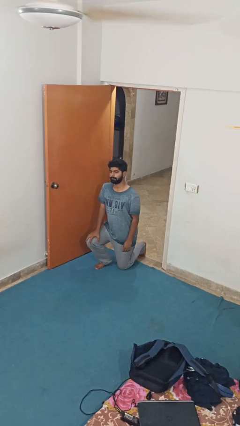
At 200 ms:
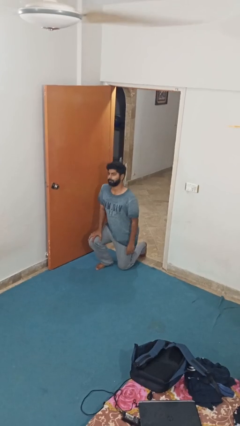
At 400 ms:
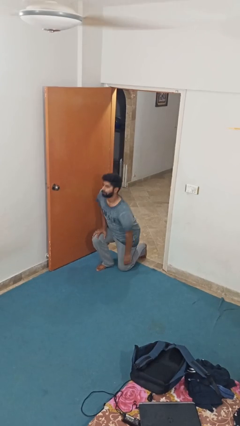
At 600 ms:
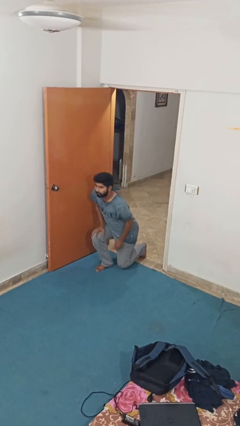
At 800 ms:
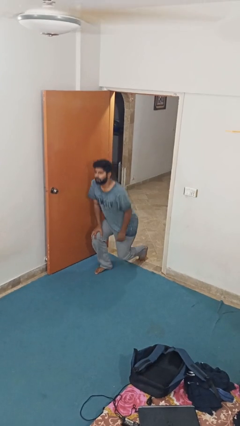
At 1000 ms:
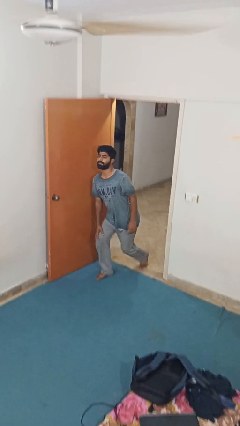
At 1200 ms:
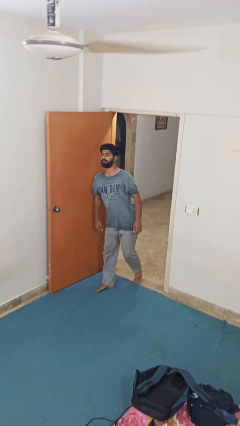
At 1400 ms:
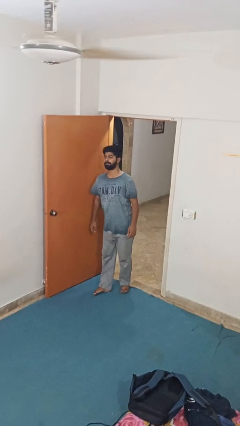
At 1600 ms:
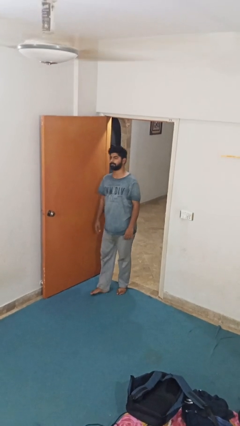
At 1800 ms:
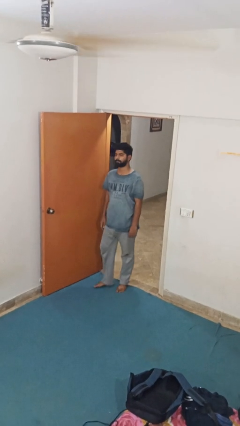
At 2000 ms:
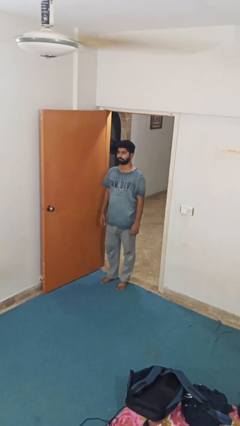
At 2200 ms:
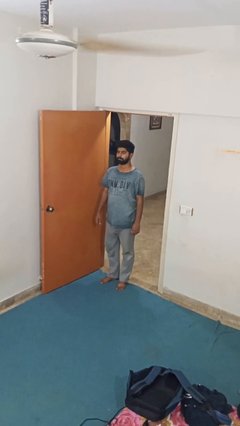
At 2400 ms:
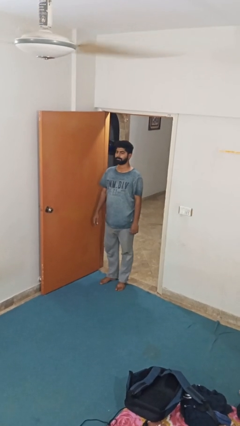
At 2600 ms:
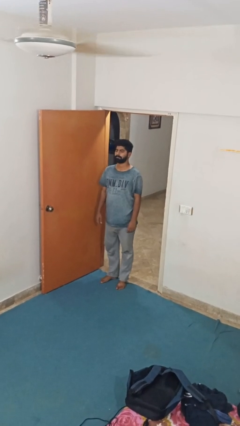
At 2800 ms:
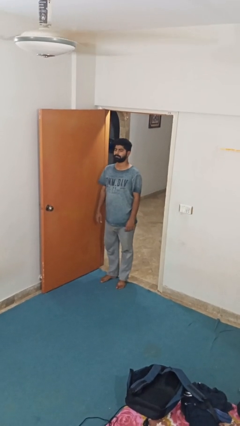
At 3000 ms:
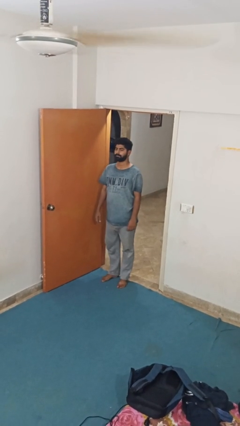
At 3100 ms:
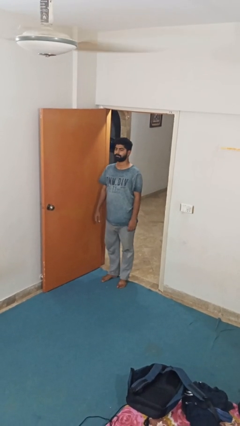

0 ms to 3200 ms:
person stands up from floor

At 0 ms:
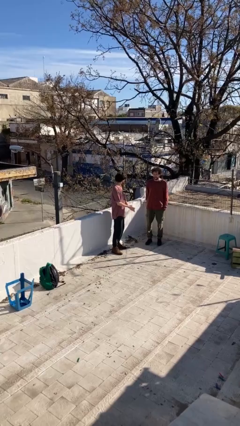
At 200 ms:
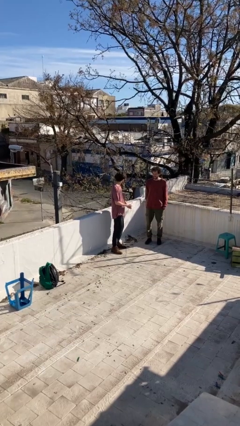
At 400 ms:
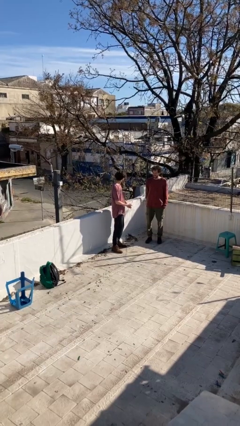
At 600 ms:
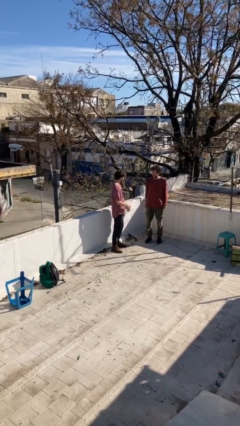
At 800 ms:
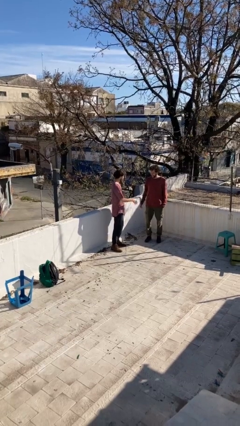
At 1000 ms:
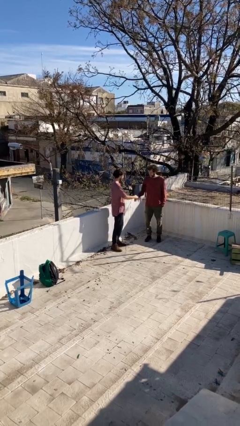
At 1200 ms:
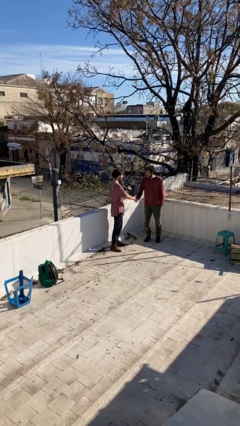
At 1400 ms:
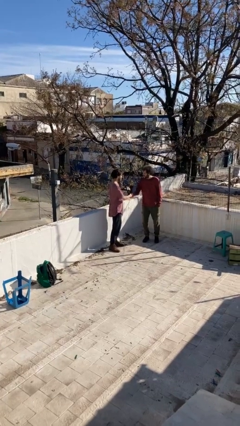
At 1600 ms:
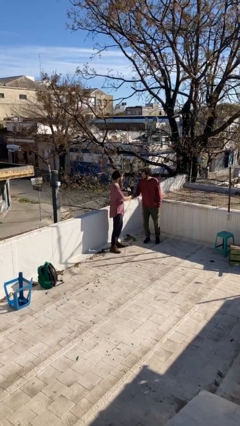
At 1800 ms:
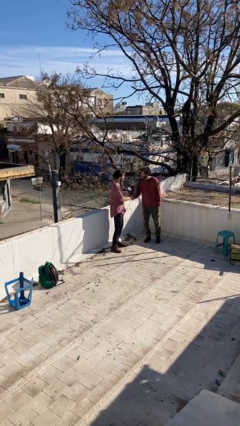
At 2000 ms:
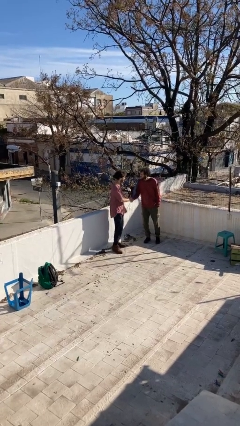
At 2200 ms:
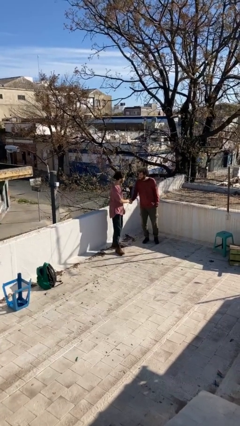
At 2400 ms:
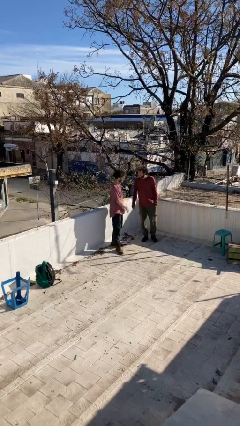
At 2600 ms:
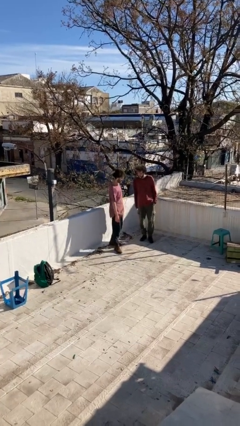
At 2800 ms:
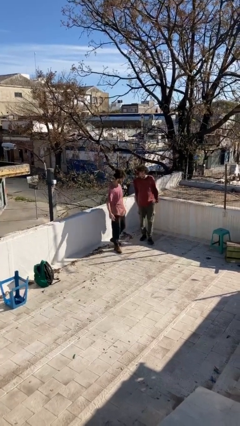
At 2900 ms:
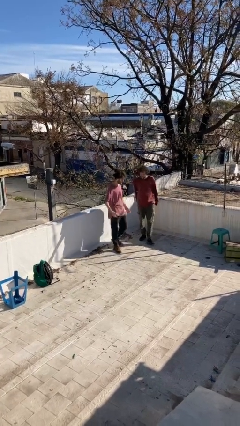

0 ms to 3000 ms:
person shakes hand

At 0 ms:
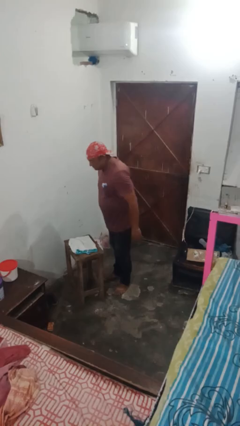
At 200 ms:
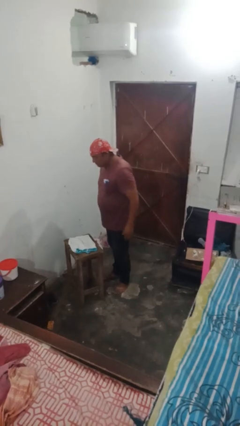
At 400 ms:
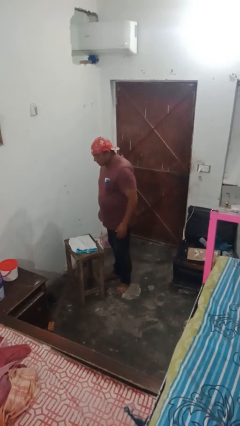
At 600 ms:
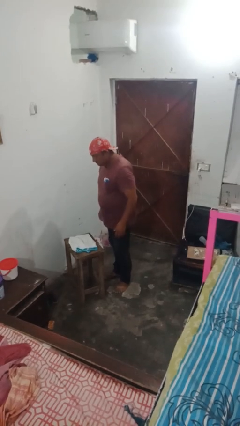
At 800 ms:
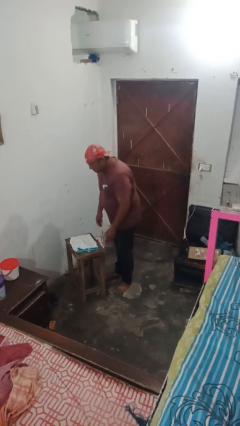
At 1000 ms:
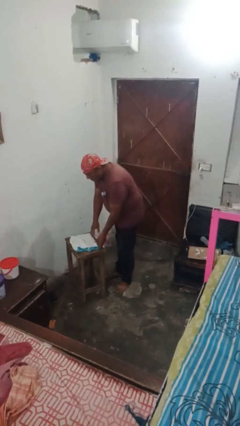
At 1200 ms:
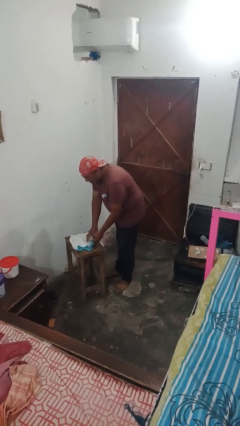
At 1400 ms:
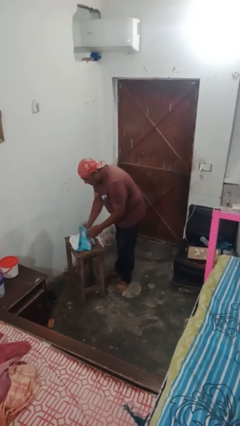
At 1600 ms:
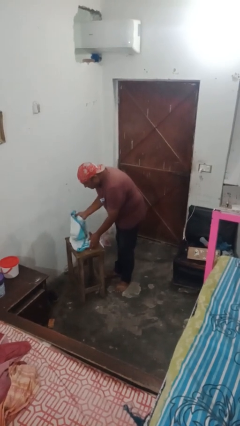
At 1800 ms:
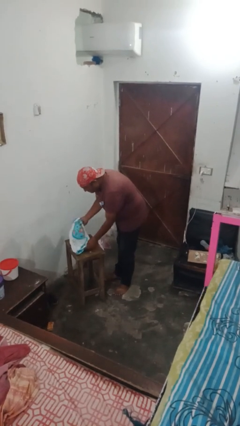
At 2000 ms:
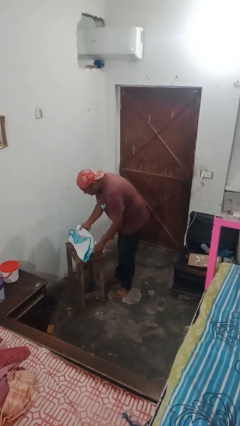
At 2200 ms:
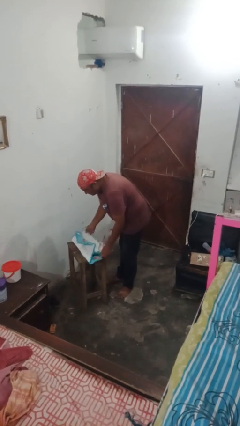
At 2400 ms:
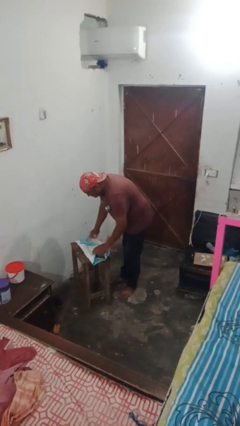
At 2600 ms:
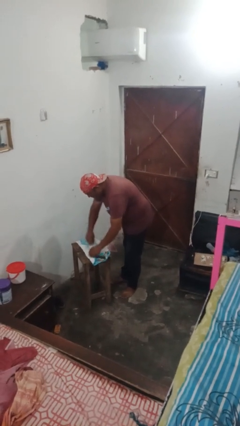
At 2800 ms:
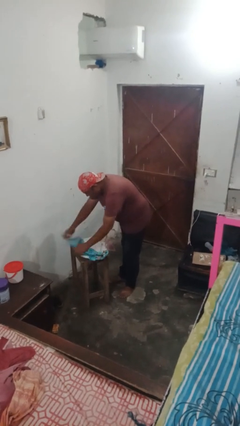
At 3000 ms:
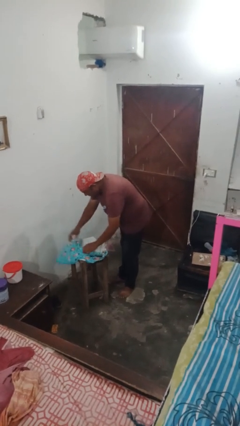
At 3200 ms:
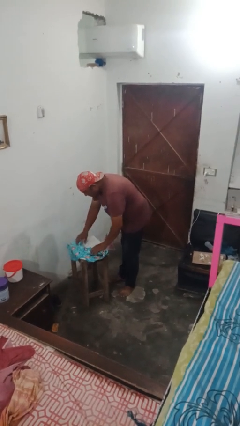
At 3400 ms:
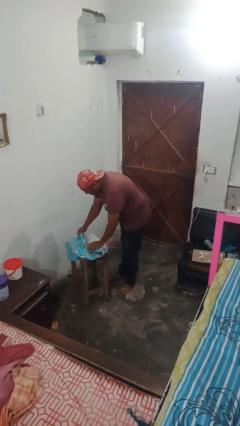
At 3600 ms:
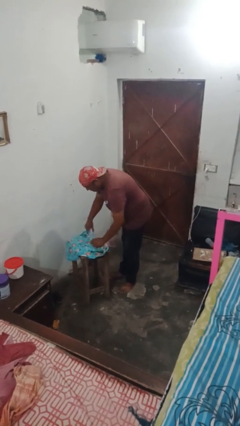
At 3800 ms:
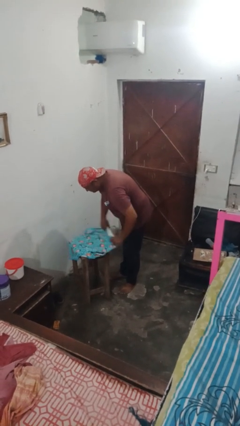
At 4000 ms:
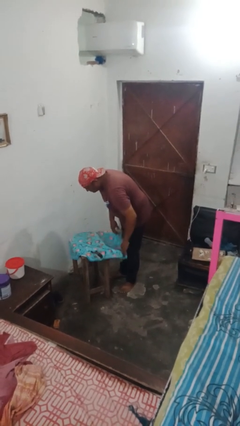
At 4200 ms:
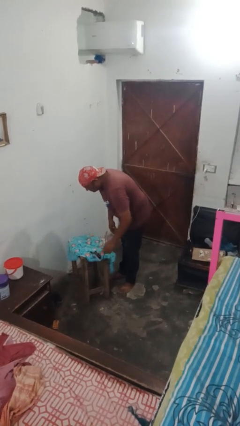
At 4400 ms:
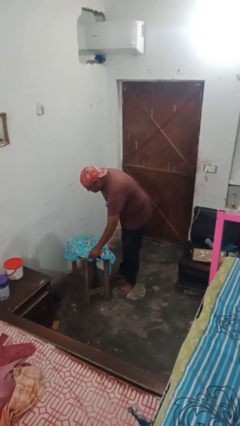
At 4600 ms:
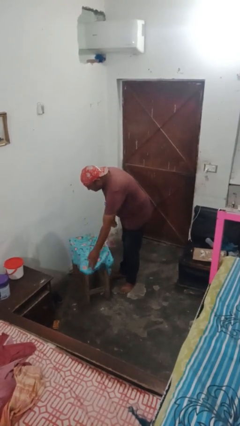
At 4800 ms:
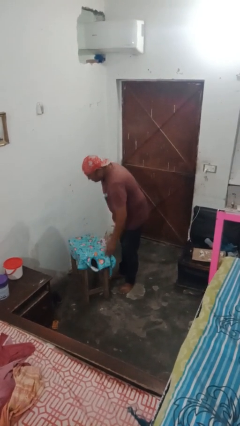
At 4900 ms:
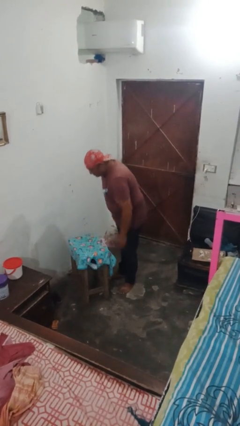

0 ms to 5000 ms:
person folds tablecloth

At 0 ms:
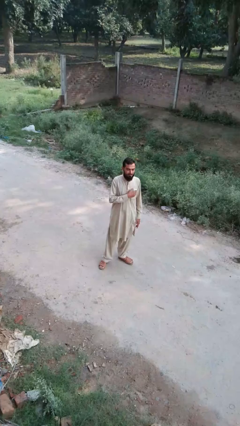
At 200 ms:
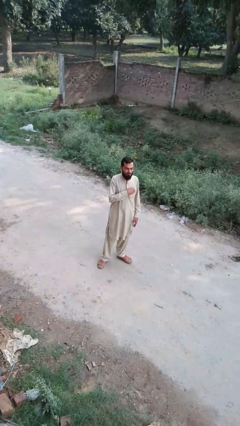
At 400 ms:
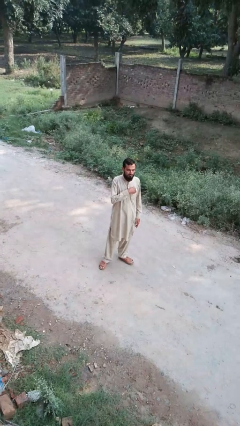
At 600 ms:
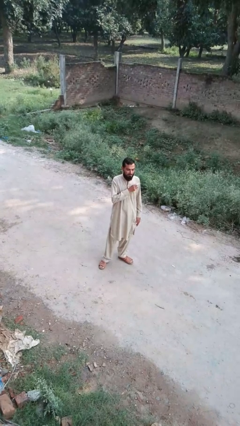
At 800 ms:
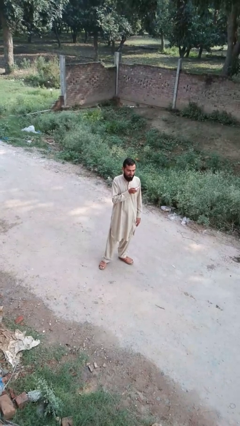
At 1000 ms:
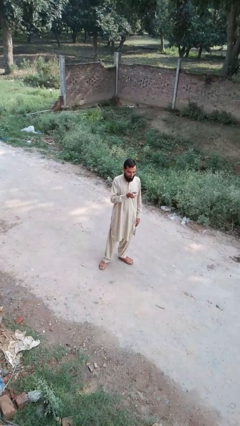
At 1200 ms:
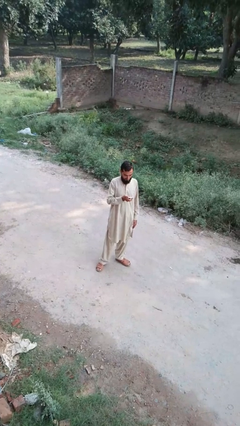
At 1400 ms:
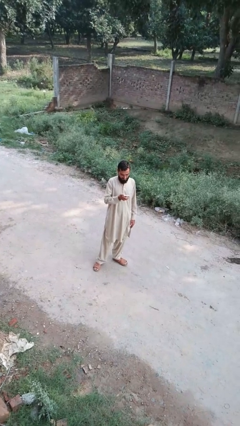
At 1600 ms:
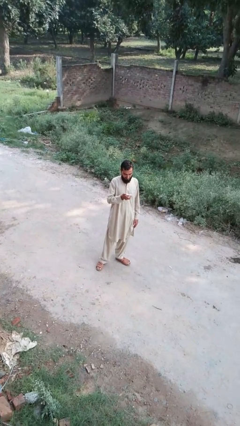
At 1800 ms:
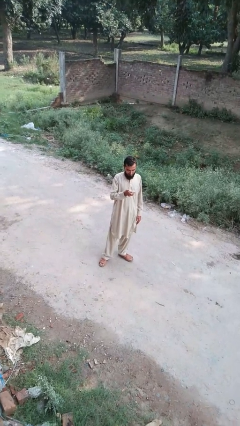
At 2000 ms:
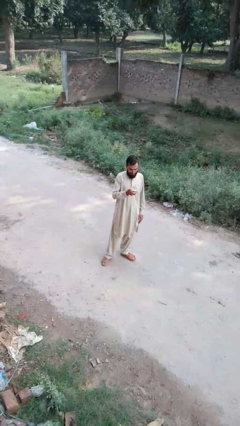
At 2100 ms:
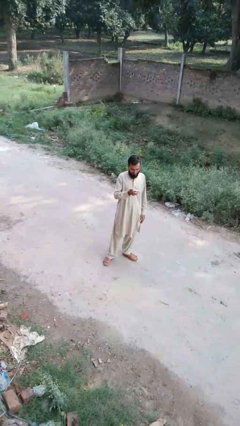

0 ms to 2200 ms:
person takes phone from pocket

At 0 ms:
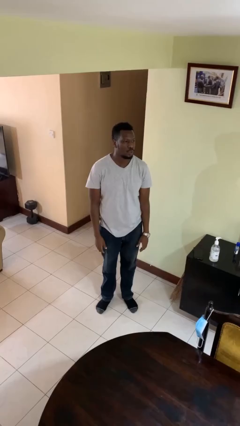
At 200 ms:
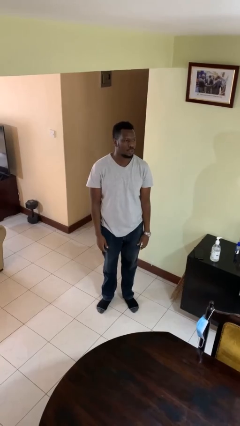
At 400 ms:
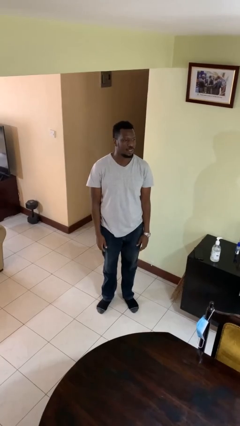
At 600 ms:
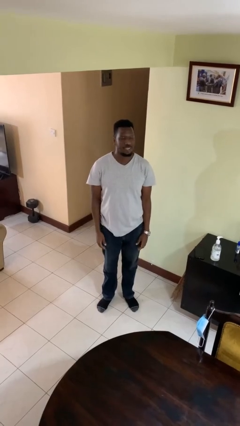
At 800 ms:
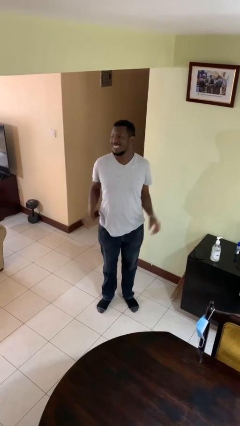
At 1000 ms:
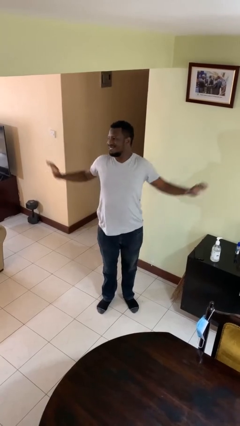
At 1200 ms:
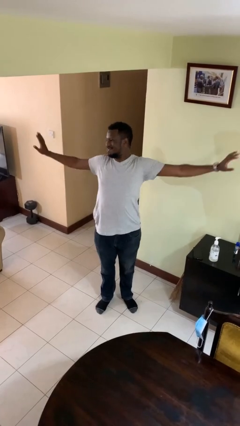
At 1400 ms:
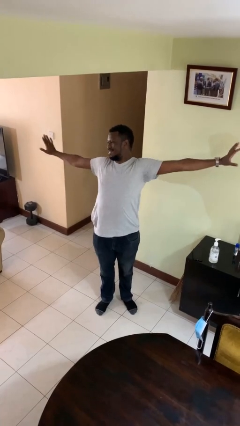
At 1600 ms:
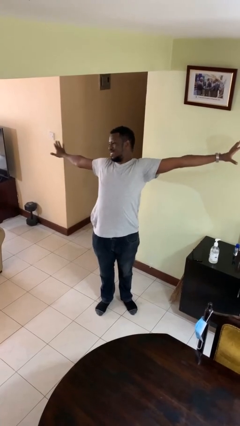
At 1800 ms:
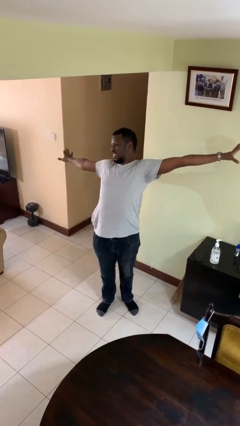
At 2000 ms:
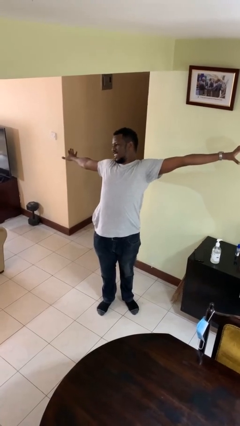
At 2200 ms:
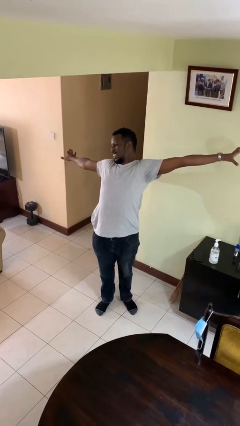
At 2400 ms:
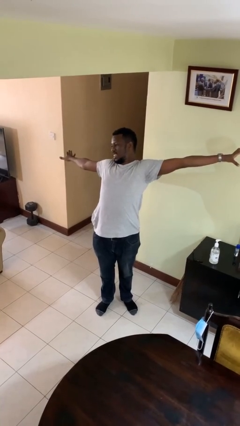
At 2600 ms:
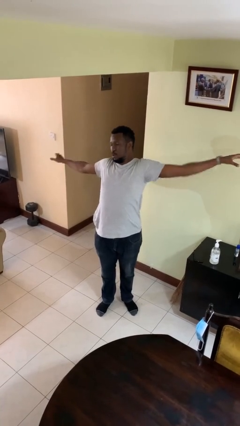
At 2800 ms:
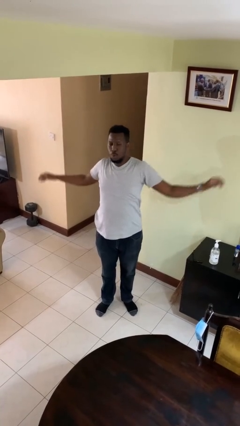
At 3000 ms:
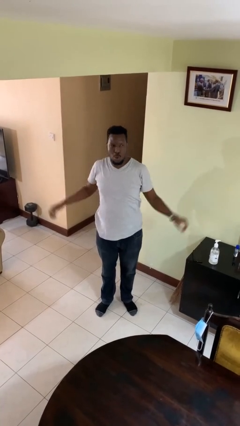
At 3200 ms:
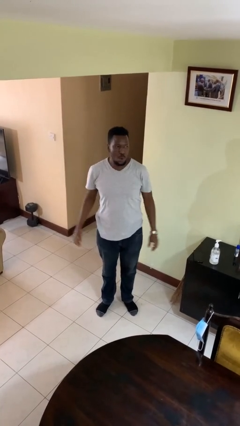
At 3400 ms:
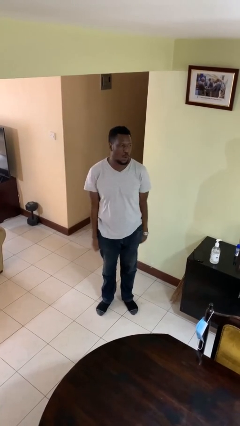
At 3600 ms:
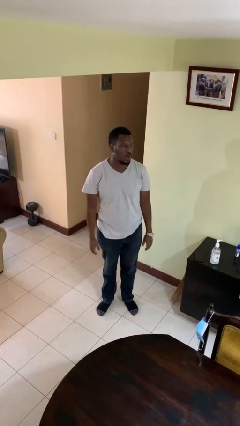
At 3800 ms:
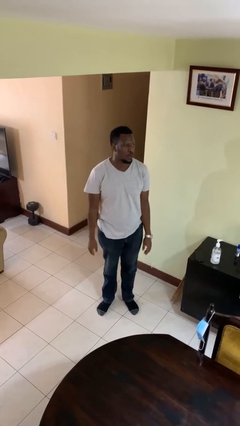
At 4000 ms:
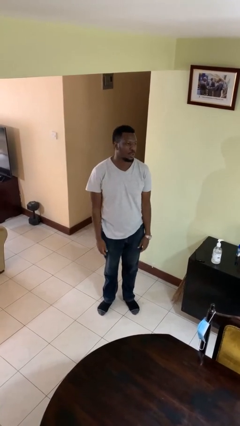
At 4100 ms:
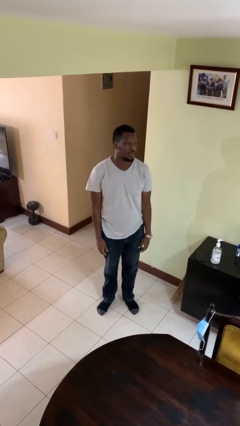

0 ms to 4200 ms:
person stretches arms to side
